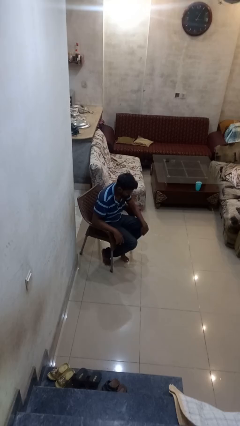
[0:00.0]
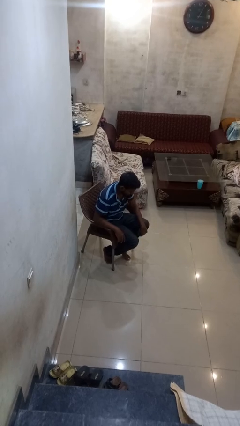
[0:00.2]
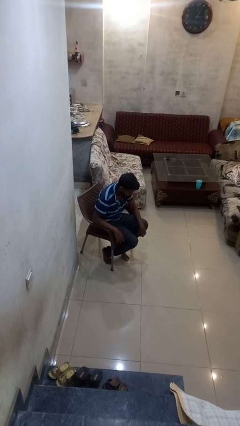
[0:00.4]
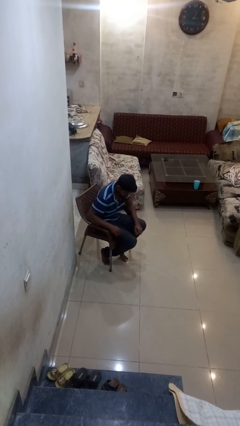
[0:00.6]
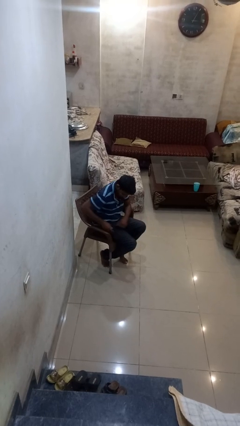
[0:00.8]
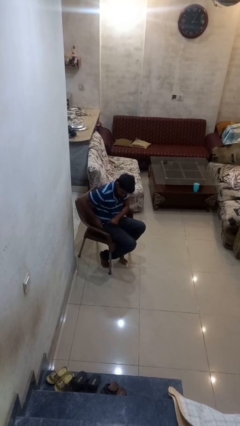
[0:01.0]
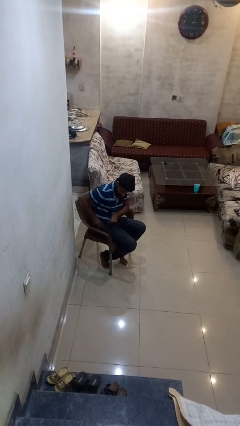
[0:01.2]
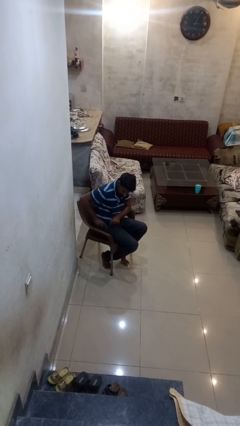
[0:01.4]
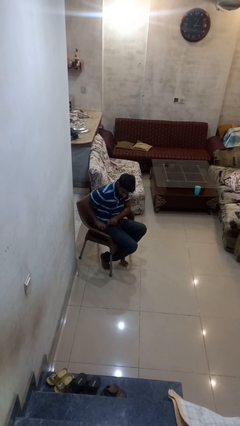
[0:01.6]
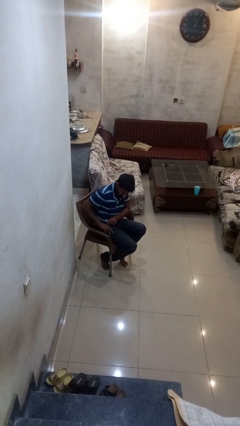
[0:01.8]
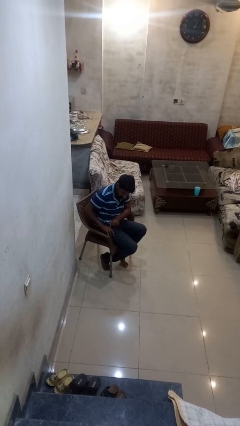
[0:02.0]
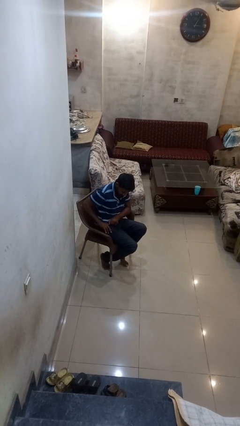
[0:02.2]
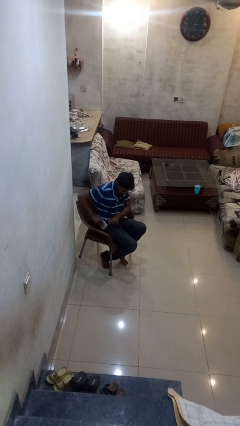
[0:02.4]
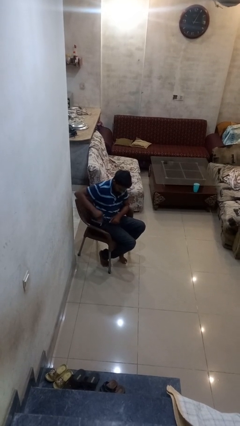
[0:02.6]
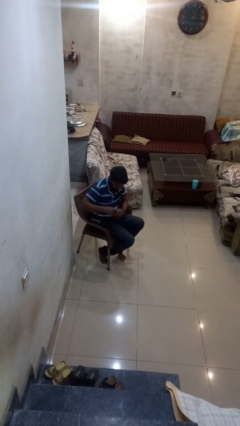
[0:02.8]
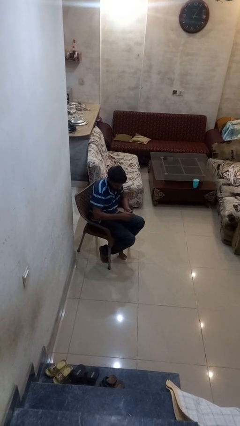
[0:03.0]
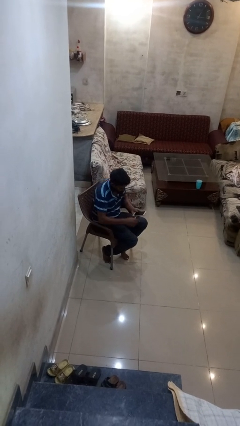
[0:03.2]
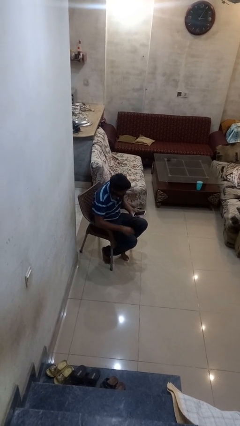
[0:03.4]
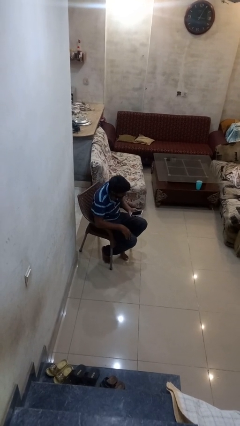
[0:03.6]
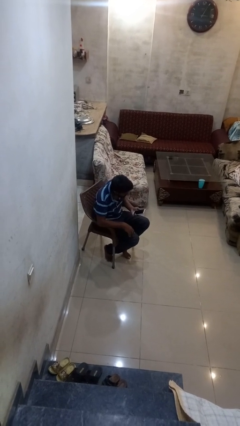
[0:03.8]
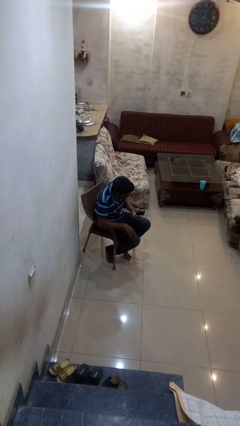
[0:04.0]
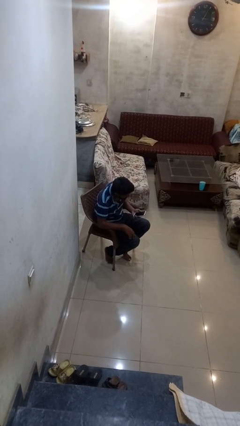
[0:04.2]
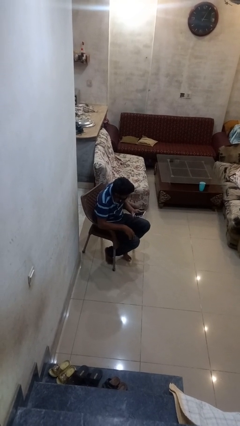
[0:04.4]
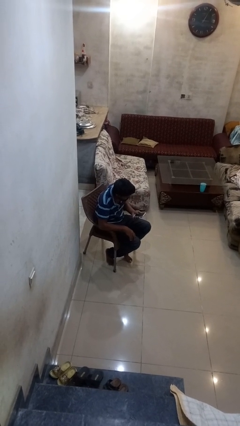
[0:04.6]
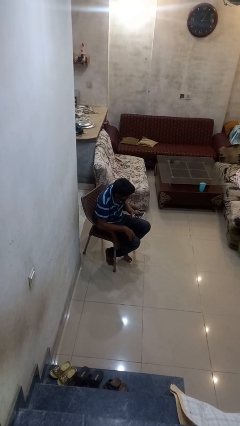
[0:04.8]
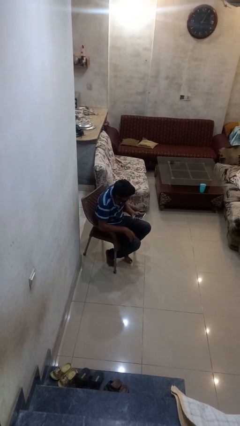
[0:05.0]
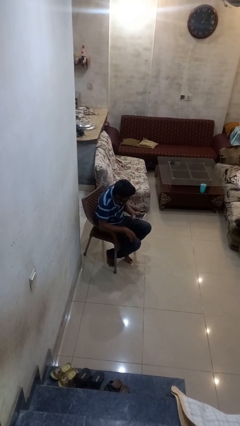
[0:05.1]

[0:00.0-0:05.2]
person takes phone from pocket

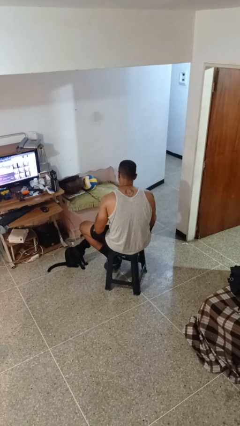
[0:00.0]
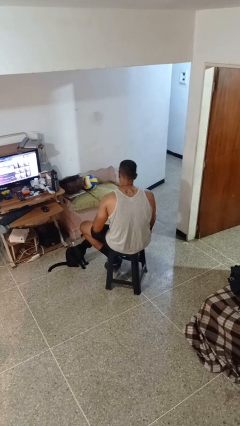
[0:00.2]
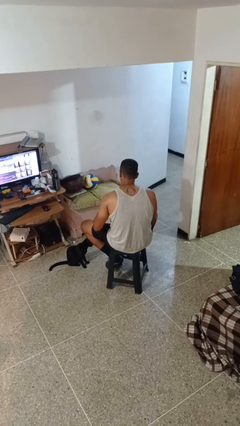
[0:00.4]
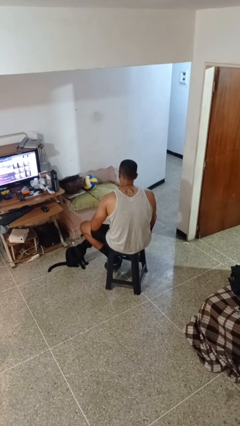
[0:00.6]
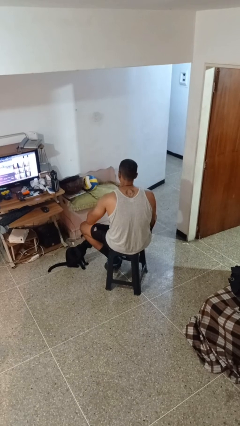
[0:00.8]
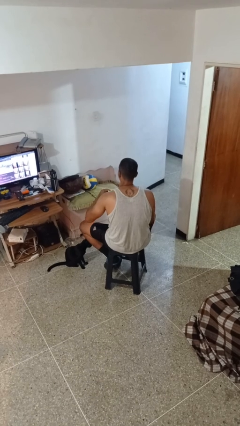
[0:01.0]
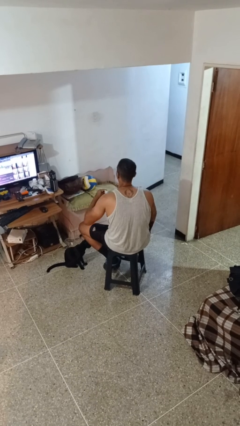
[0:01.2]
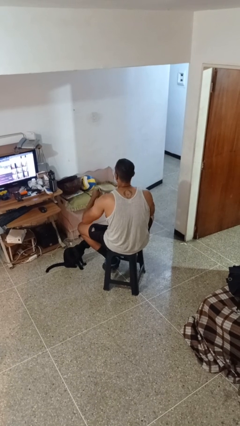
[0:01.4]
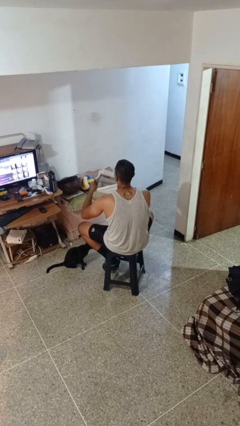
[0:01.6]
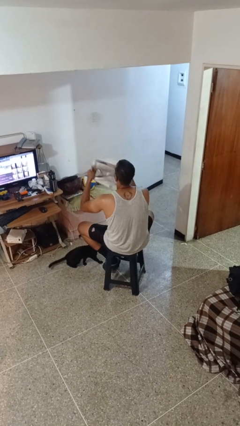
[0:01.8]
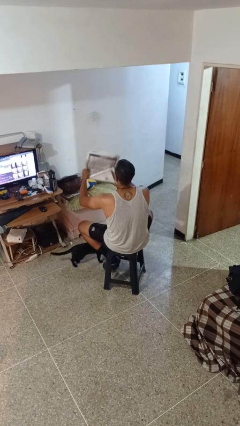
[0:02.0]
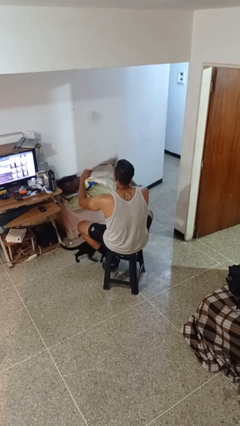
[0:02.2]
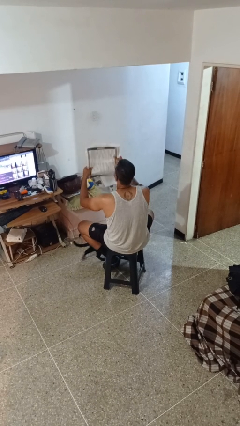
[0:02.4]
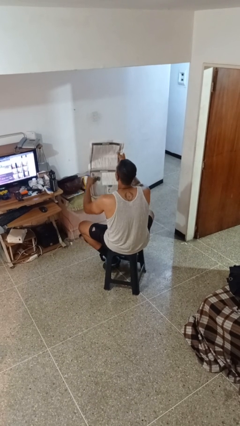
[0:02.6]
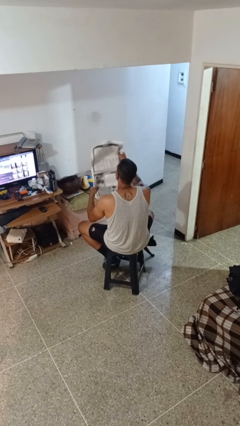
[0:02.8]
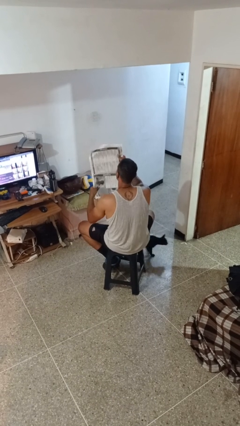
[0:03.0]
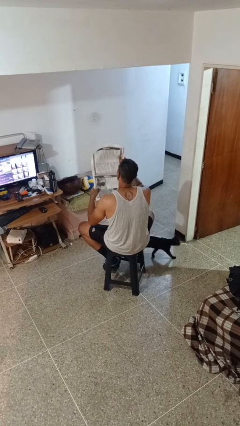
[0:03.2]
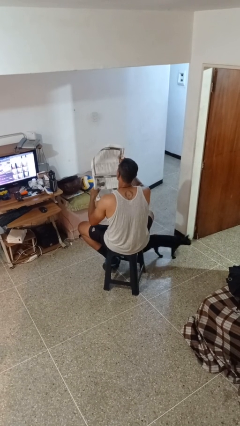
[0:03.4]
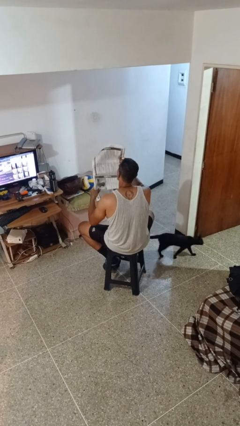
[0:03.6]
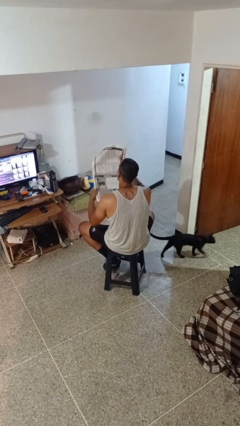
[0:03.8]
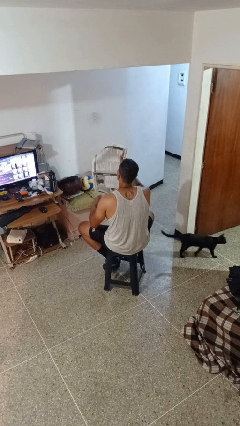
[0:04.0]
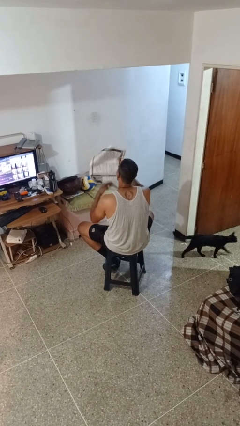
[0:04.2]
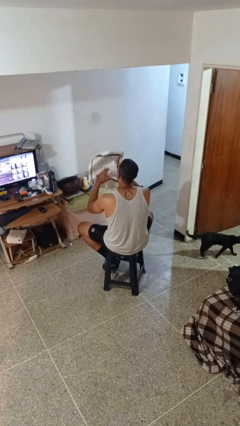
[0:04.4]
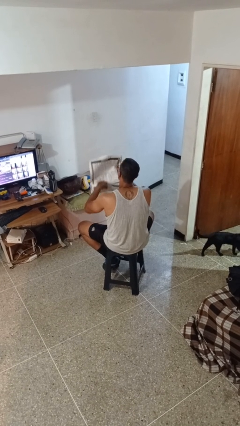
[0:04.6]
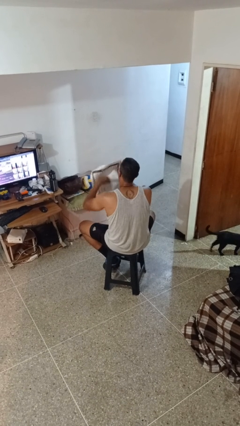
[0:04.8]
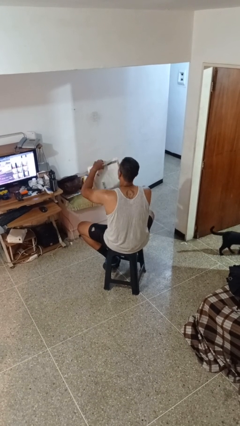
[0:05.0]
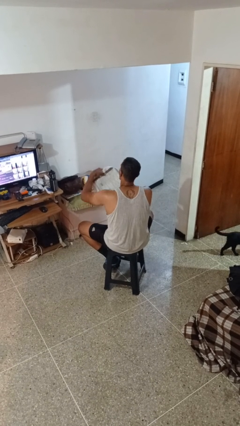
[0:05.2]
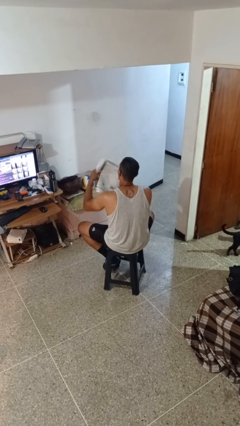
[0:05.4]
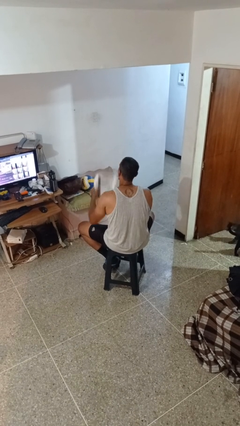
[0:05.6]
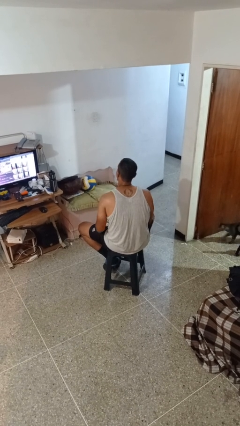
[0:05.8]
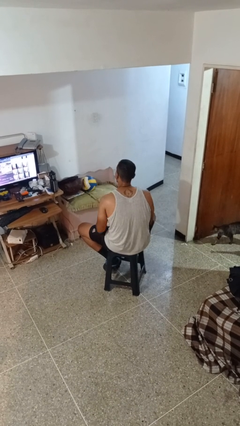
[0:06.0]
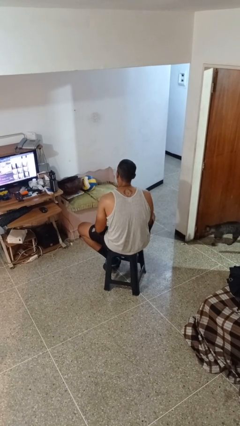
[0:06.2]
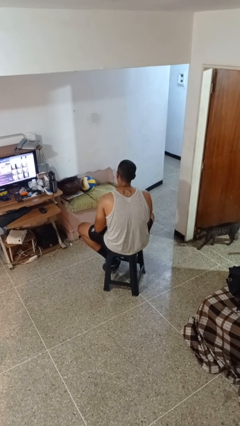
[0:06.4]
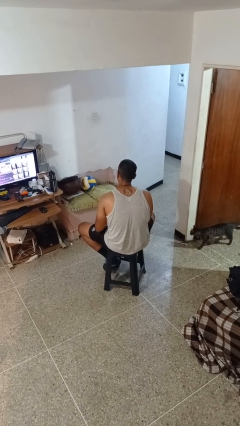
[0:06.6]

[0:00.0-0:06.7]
person reads newspaper

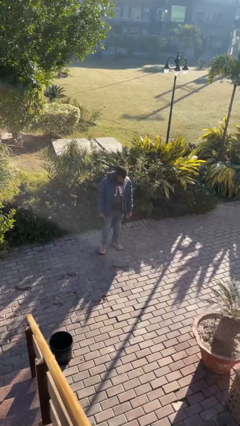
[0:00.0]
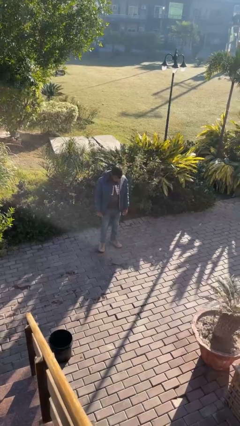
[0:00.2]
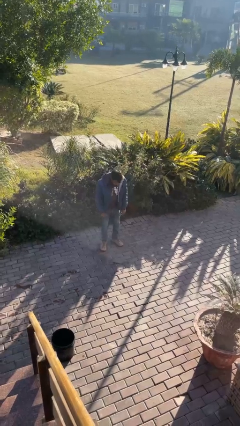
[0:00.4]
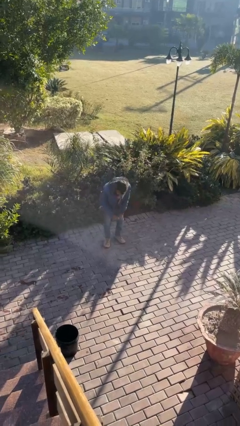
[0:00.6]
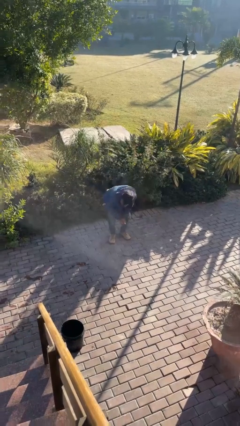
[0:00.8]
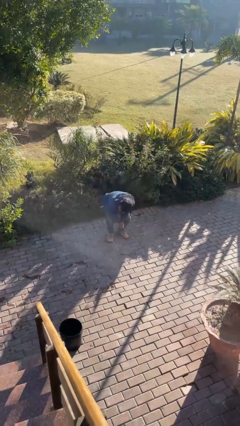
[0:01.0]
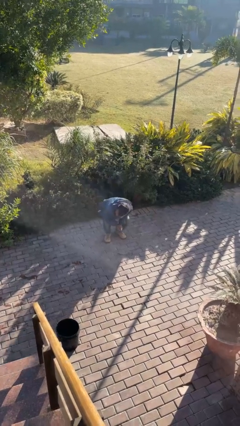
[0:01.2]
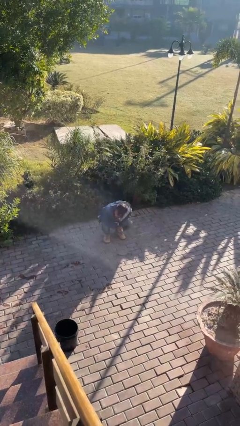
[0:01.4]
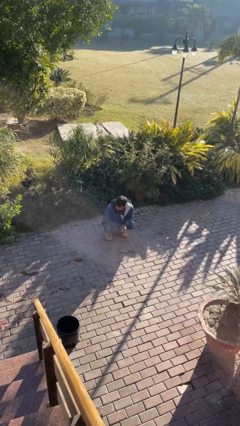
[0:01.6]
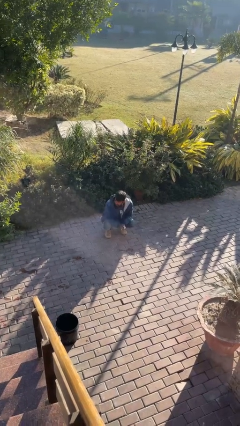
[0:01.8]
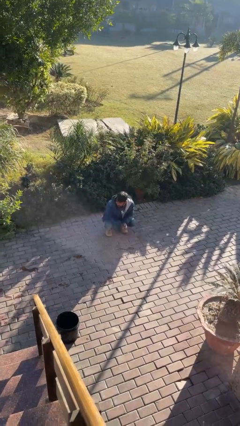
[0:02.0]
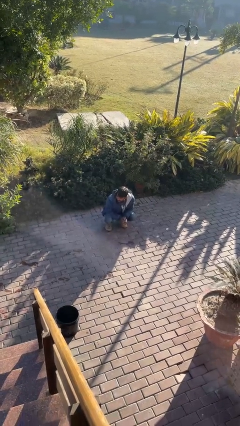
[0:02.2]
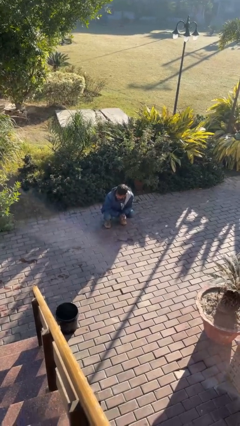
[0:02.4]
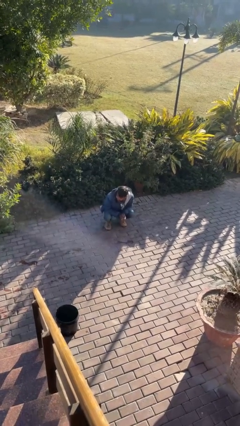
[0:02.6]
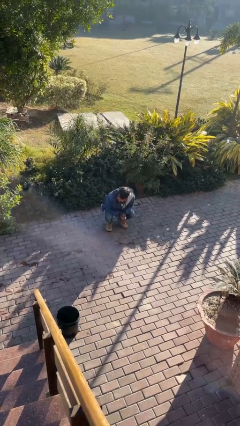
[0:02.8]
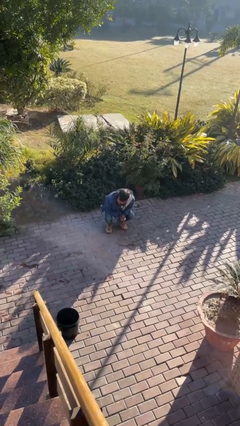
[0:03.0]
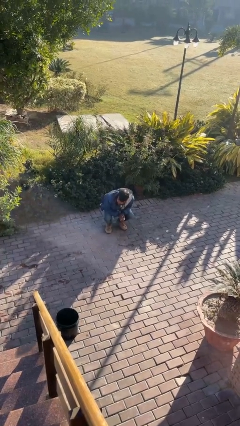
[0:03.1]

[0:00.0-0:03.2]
person sits down

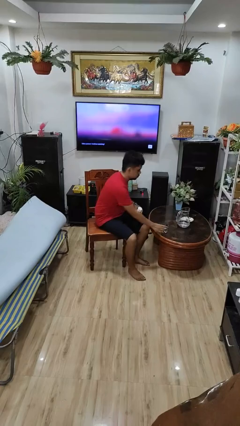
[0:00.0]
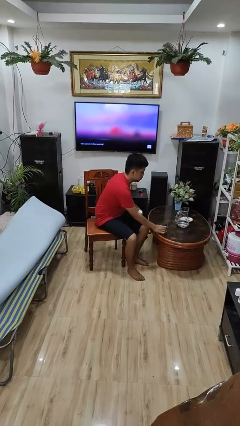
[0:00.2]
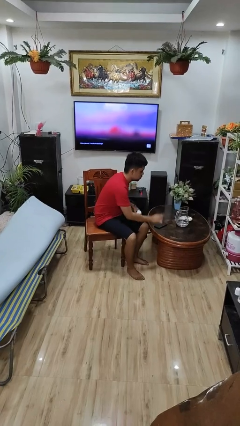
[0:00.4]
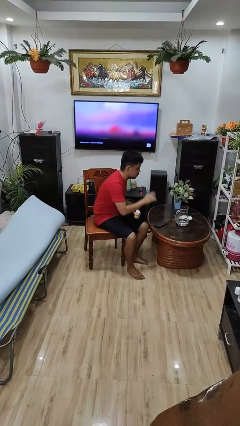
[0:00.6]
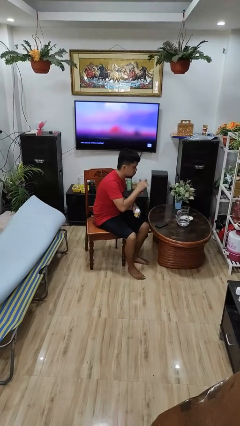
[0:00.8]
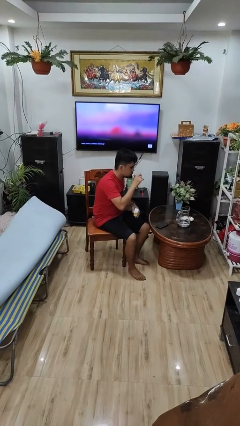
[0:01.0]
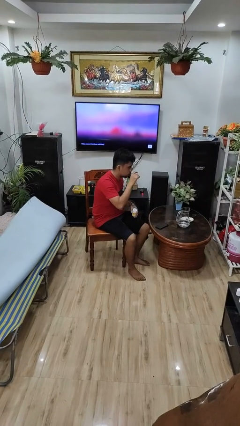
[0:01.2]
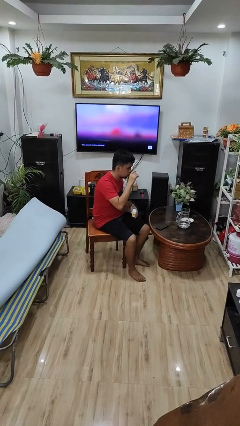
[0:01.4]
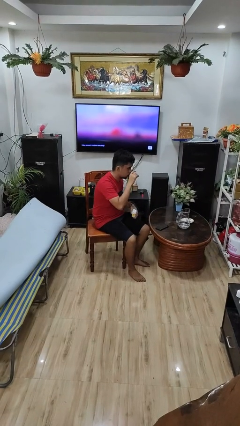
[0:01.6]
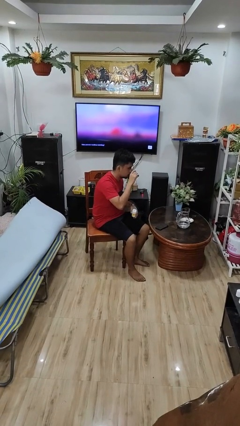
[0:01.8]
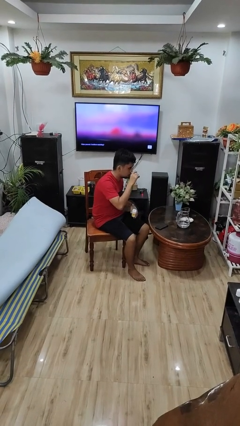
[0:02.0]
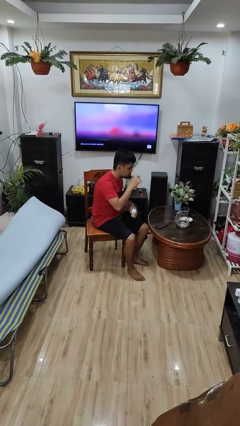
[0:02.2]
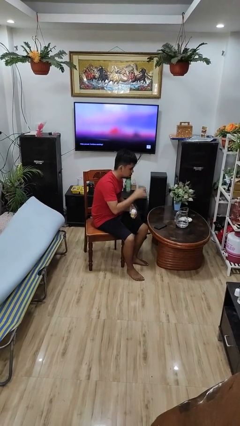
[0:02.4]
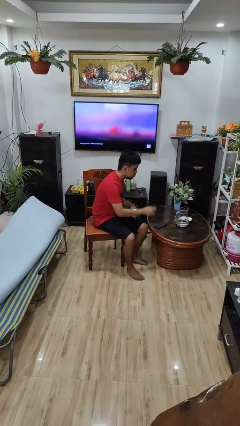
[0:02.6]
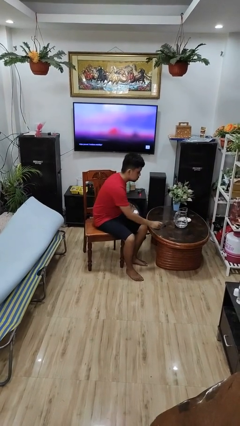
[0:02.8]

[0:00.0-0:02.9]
person drinks from cup

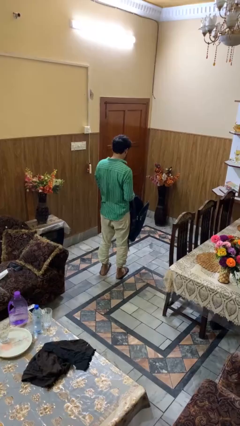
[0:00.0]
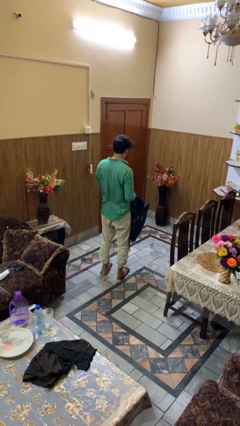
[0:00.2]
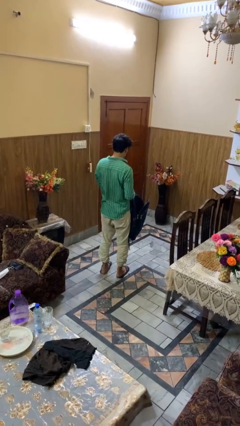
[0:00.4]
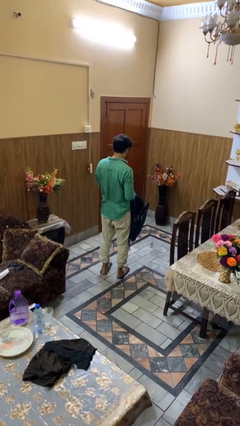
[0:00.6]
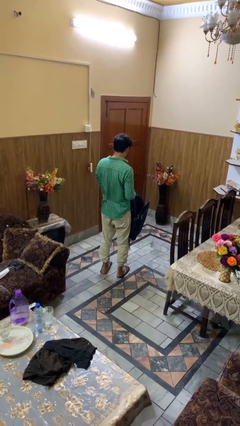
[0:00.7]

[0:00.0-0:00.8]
person searches in backpack
